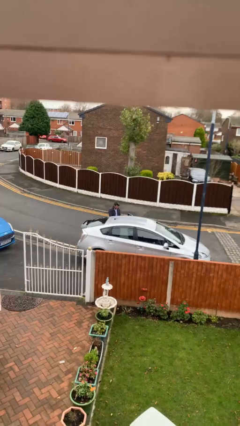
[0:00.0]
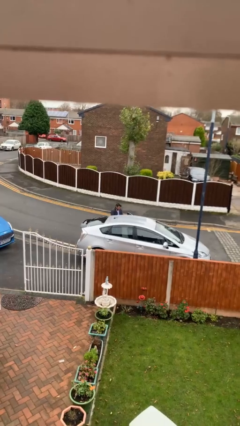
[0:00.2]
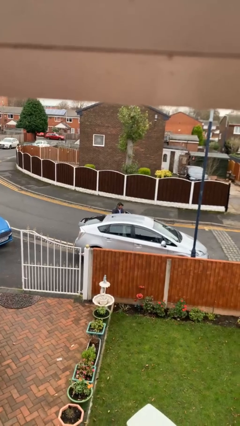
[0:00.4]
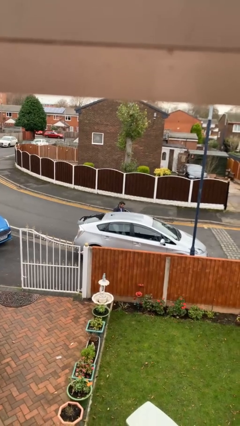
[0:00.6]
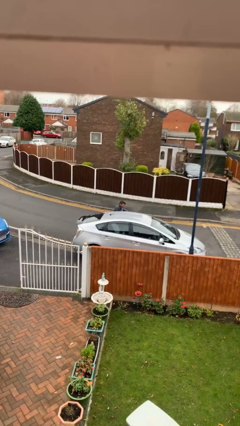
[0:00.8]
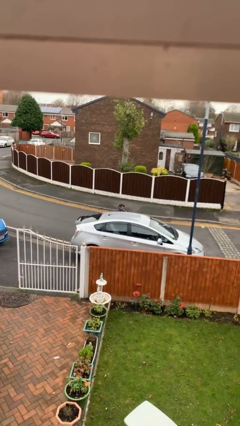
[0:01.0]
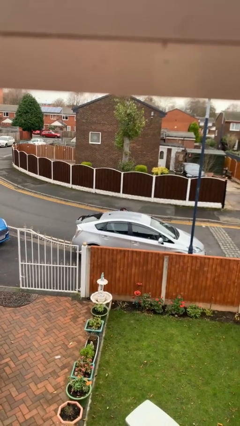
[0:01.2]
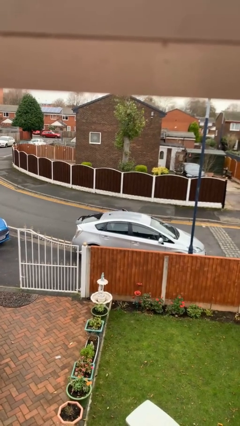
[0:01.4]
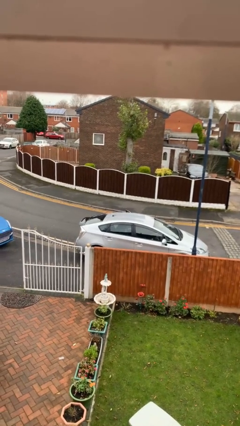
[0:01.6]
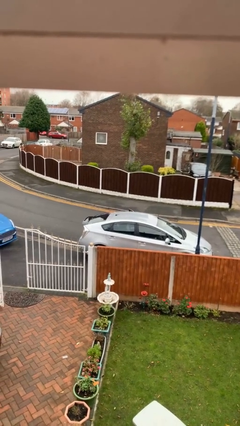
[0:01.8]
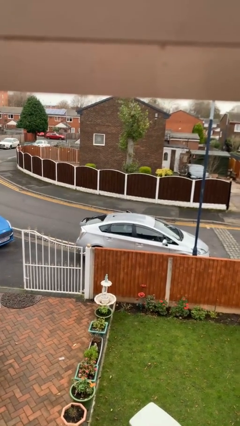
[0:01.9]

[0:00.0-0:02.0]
person enters car

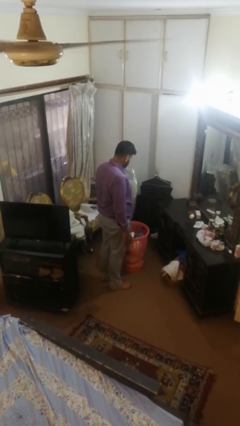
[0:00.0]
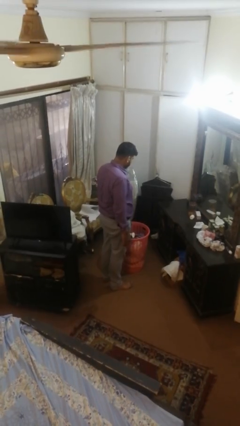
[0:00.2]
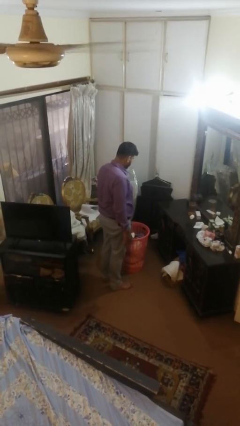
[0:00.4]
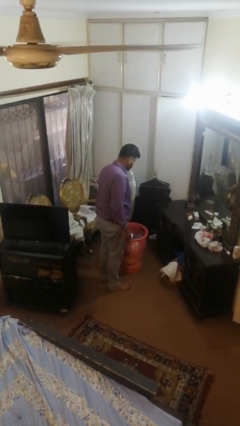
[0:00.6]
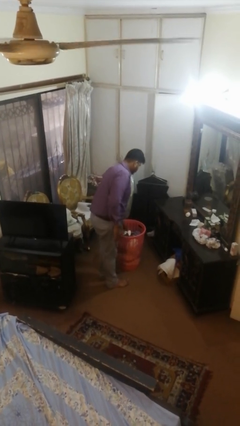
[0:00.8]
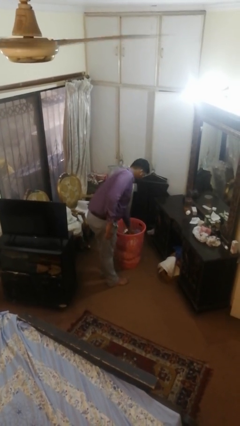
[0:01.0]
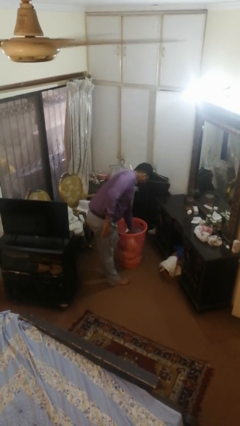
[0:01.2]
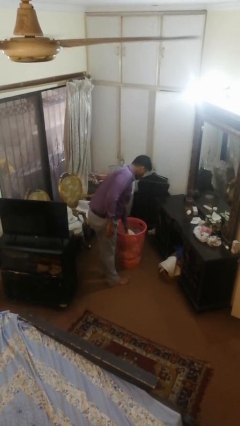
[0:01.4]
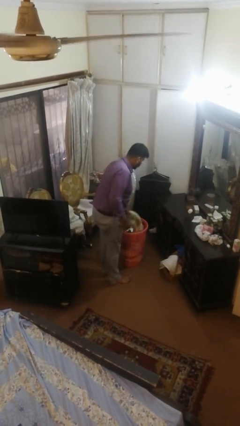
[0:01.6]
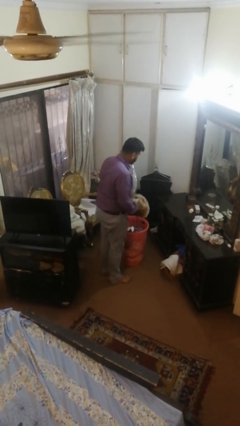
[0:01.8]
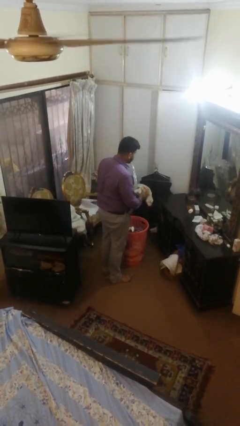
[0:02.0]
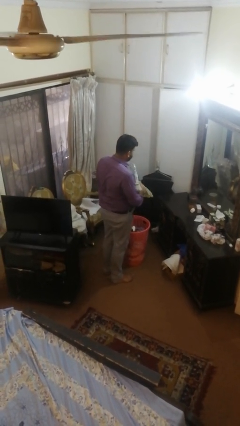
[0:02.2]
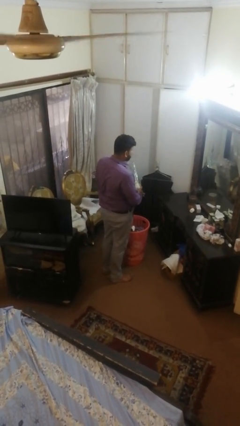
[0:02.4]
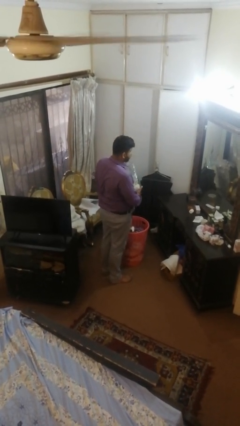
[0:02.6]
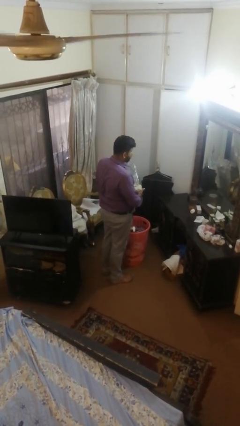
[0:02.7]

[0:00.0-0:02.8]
person takes object from basket

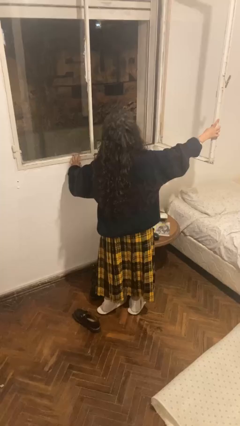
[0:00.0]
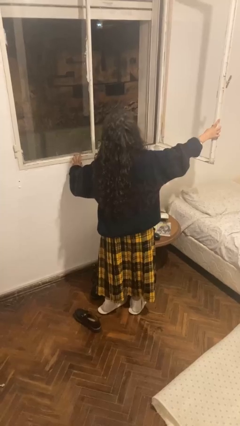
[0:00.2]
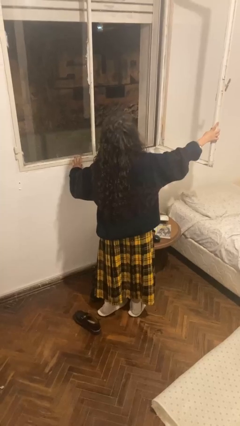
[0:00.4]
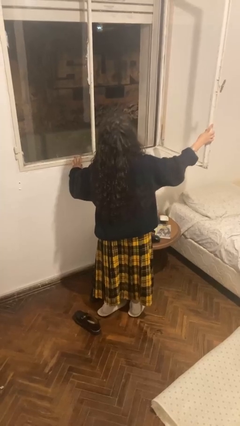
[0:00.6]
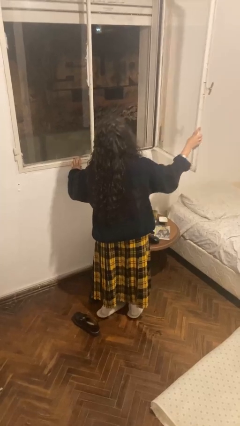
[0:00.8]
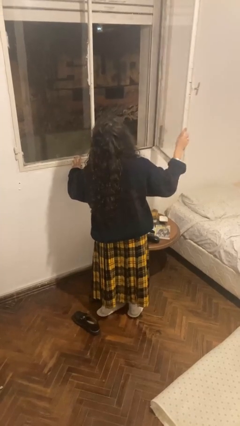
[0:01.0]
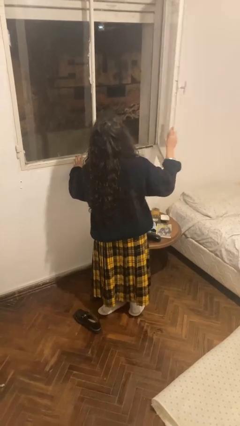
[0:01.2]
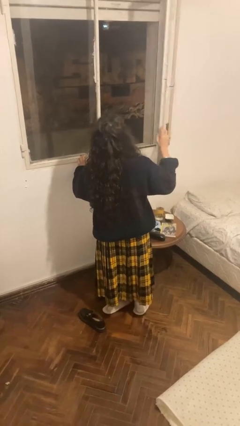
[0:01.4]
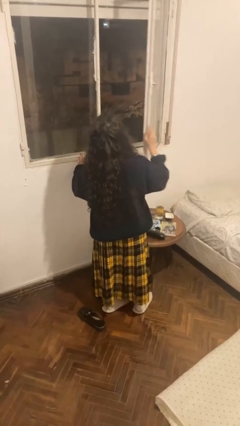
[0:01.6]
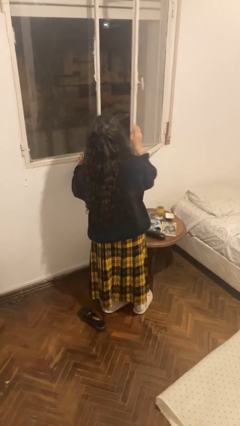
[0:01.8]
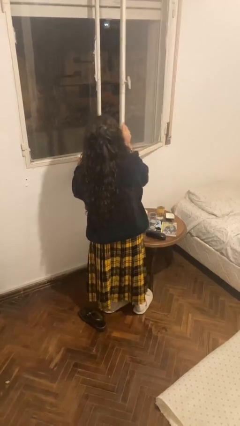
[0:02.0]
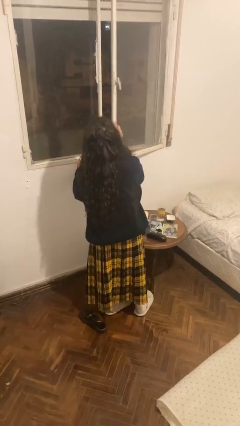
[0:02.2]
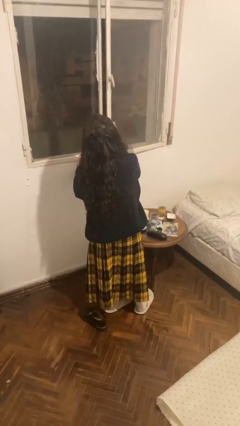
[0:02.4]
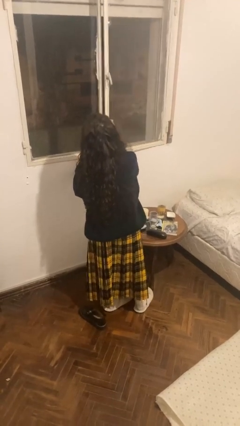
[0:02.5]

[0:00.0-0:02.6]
person closes home window

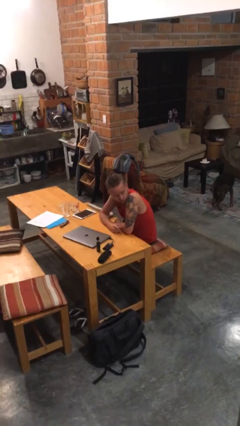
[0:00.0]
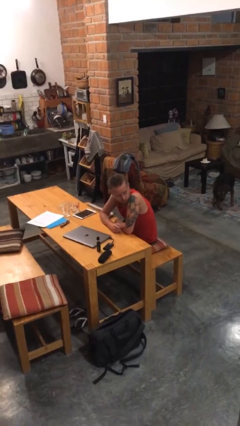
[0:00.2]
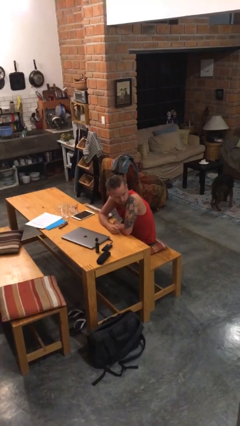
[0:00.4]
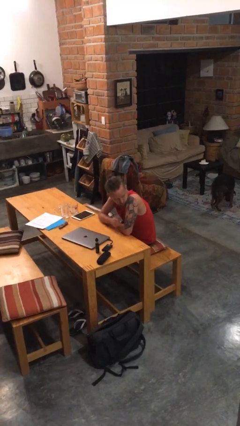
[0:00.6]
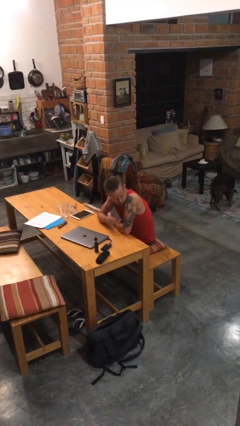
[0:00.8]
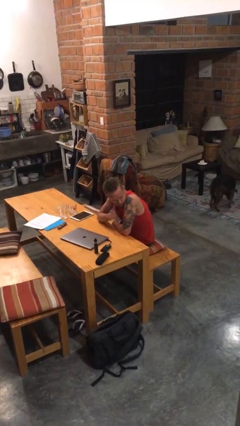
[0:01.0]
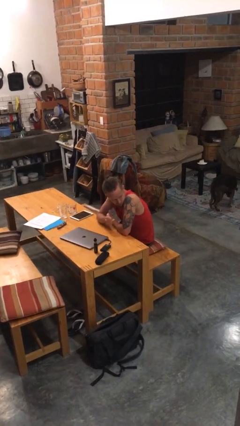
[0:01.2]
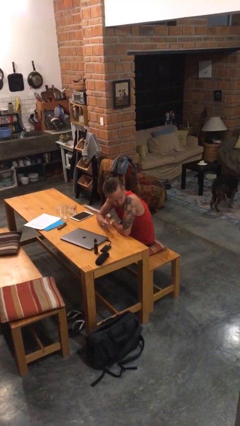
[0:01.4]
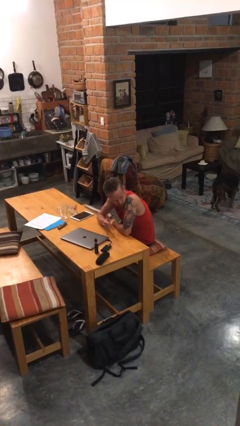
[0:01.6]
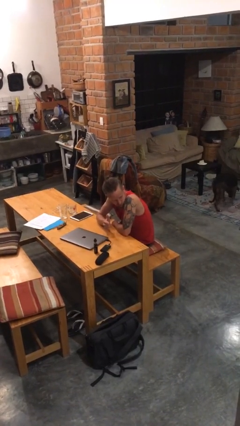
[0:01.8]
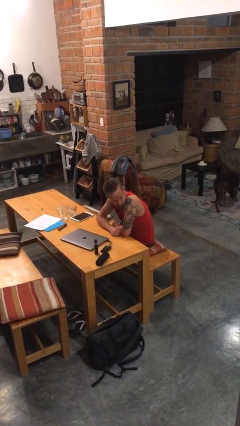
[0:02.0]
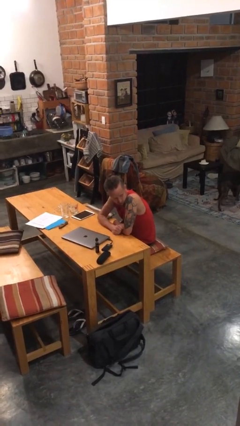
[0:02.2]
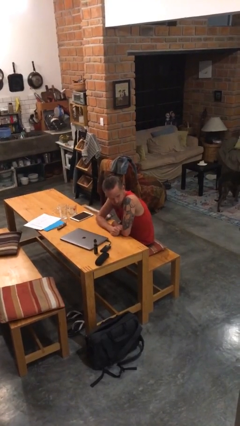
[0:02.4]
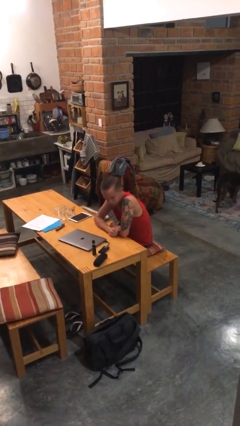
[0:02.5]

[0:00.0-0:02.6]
person gestures thumbs up

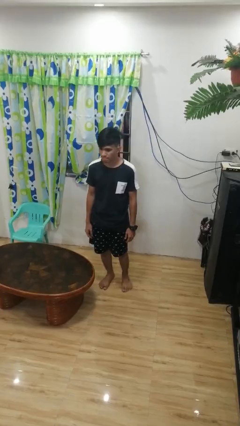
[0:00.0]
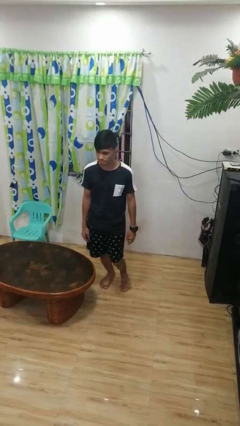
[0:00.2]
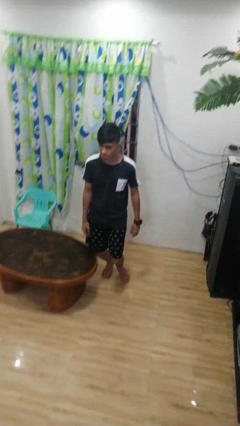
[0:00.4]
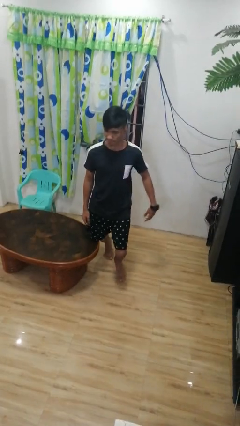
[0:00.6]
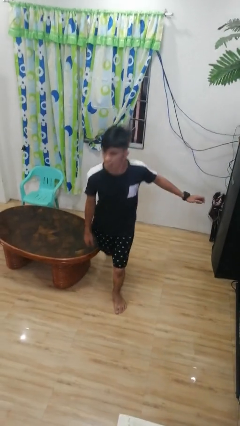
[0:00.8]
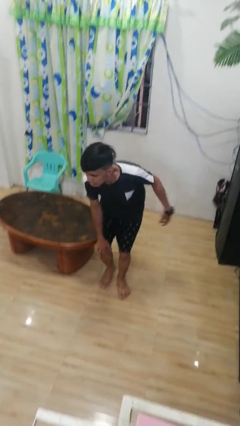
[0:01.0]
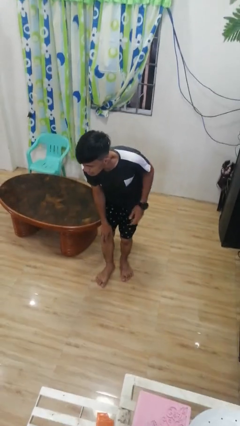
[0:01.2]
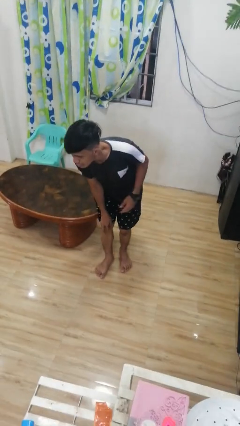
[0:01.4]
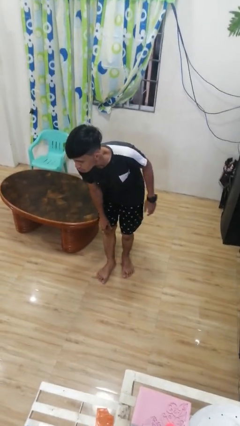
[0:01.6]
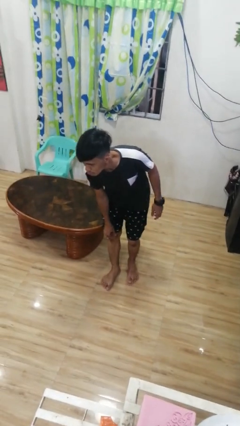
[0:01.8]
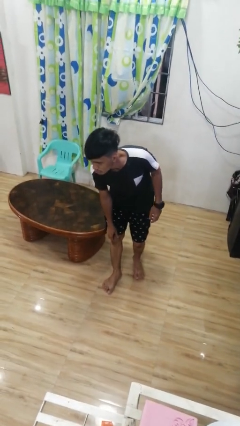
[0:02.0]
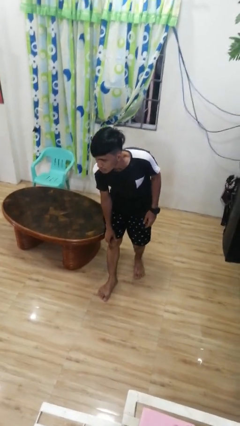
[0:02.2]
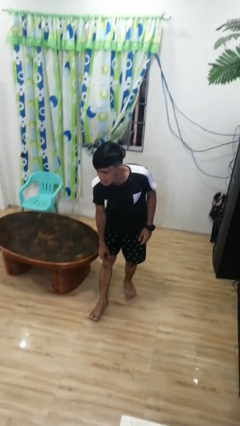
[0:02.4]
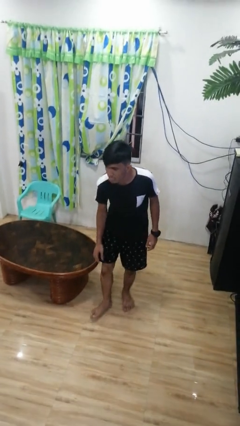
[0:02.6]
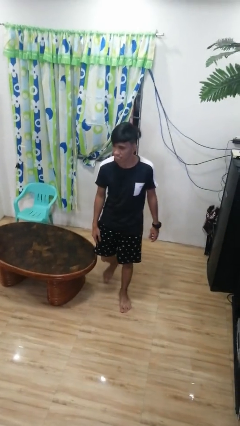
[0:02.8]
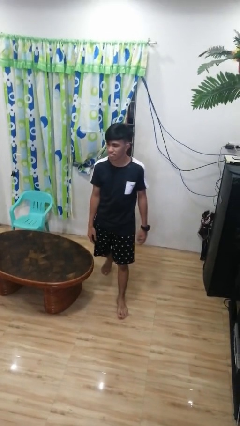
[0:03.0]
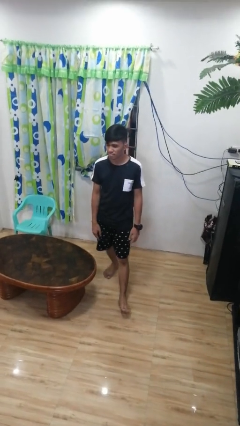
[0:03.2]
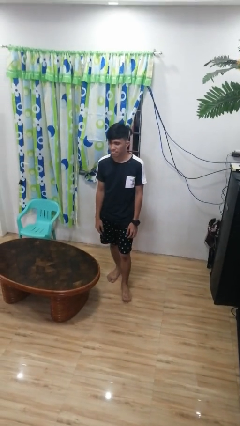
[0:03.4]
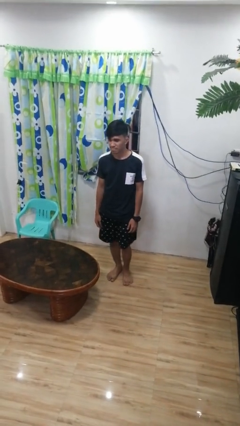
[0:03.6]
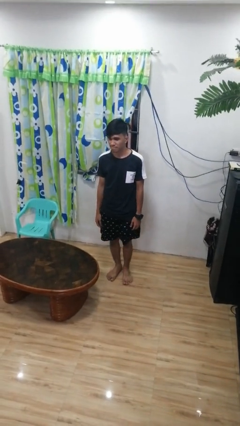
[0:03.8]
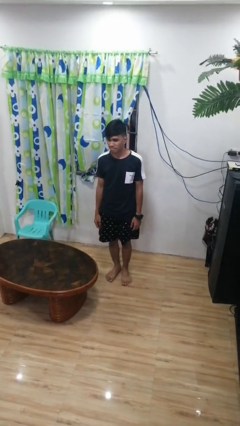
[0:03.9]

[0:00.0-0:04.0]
person bumps into table

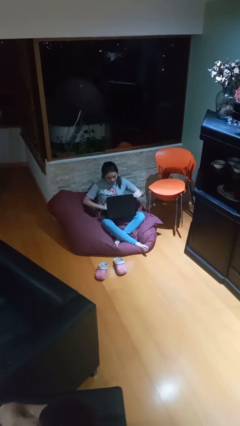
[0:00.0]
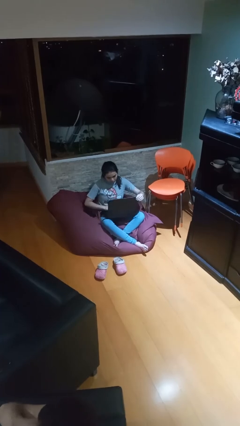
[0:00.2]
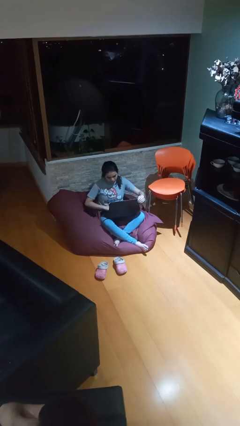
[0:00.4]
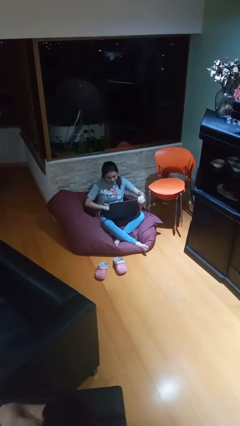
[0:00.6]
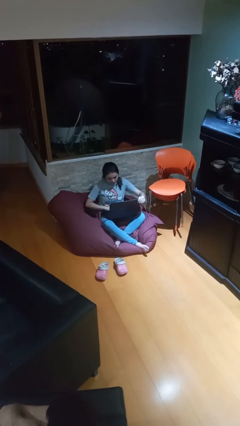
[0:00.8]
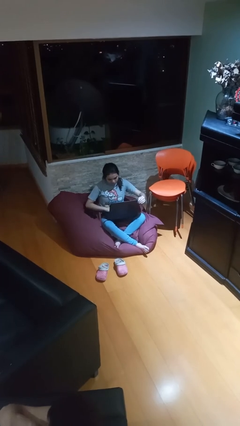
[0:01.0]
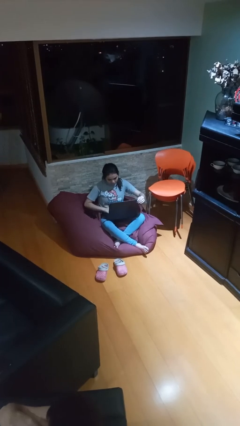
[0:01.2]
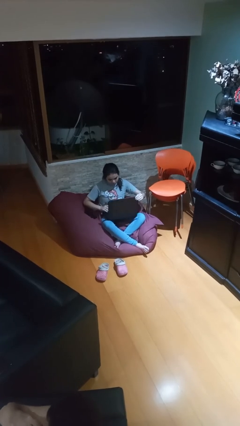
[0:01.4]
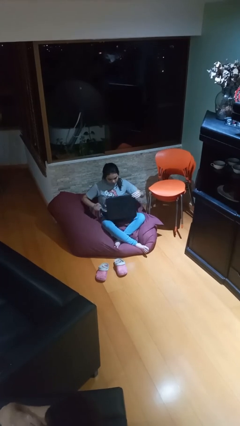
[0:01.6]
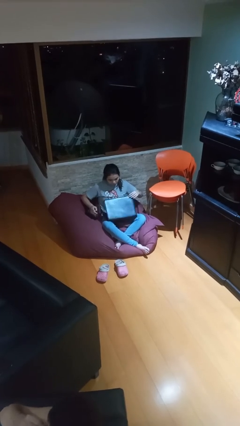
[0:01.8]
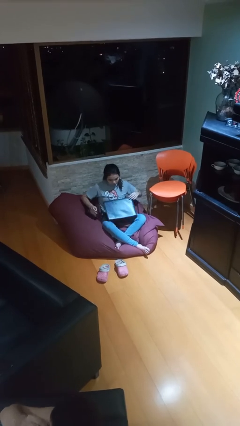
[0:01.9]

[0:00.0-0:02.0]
person interacts with laptop

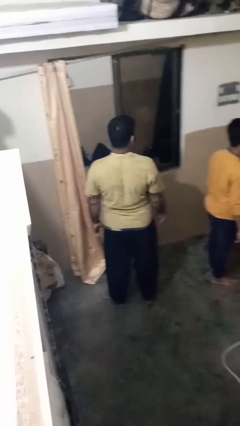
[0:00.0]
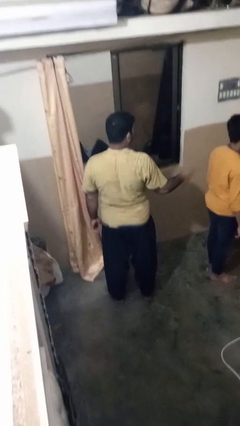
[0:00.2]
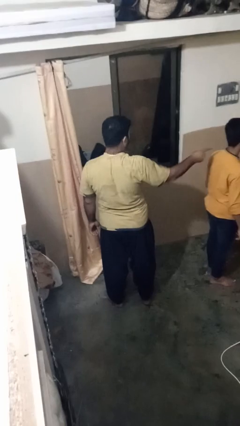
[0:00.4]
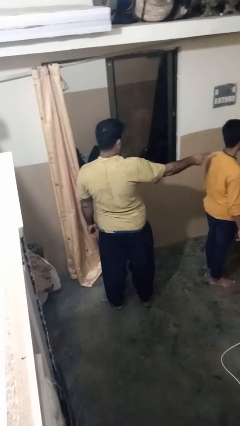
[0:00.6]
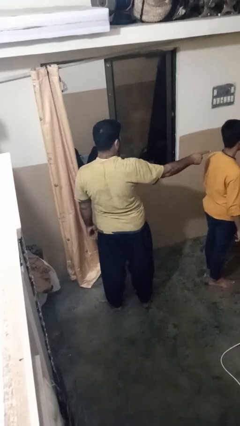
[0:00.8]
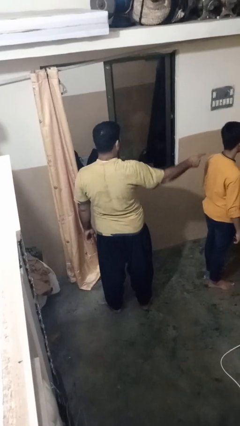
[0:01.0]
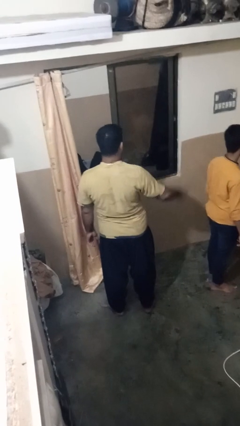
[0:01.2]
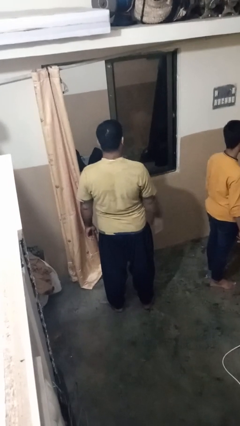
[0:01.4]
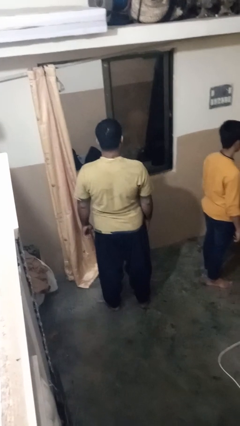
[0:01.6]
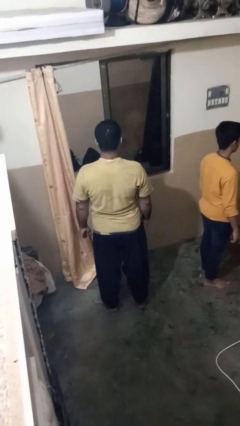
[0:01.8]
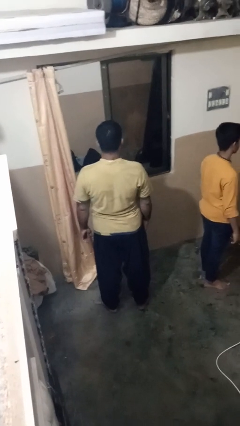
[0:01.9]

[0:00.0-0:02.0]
person points at person
